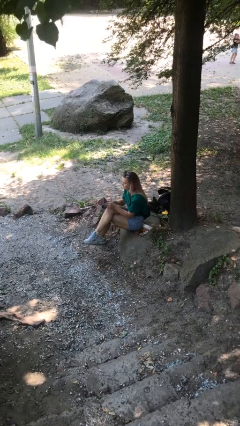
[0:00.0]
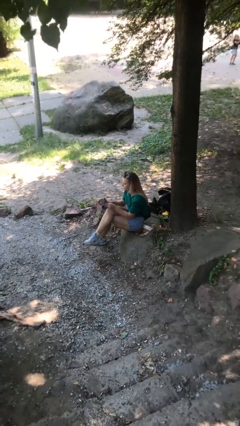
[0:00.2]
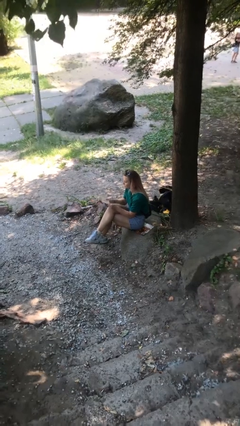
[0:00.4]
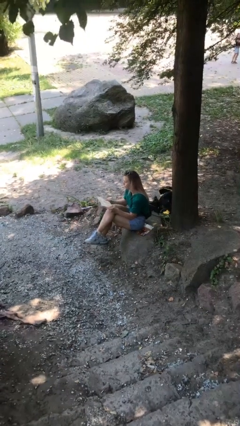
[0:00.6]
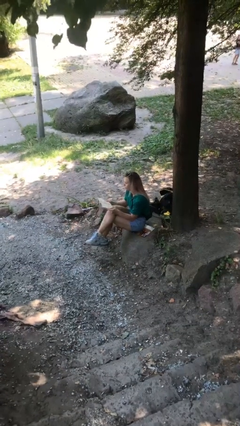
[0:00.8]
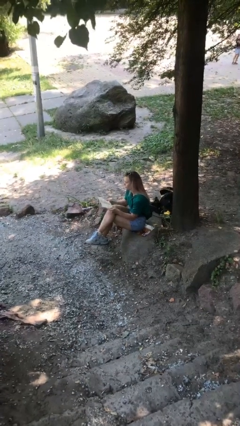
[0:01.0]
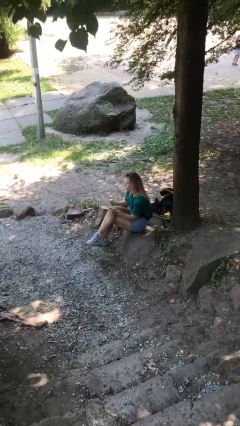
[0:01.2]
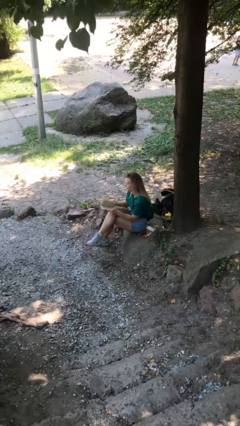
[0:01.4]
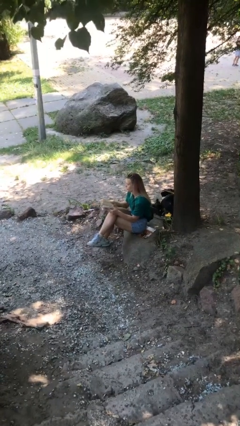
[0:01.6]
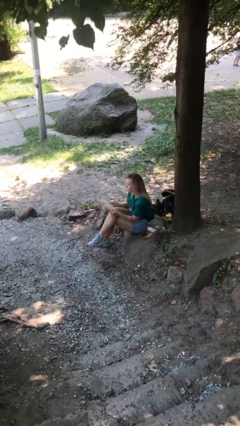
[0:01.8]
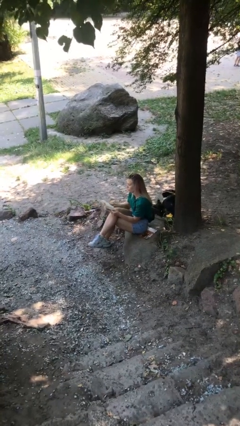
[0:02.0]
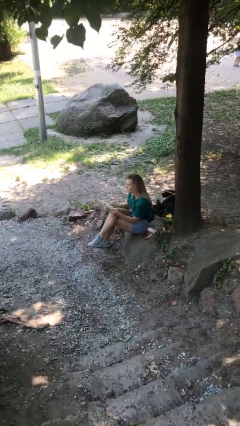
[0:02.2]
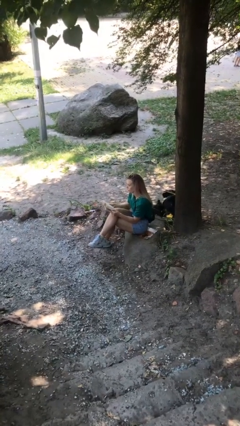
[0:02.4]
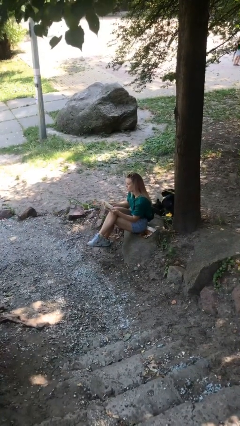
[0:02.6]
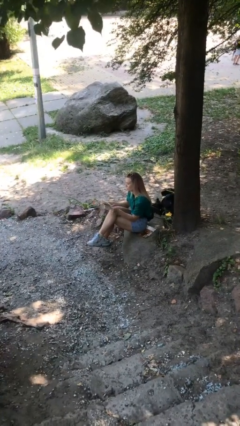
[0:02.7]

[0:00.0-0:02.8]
person reads book

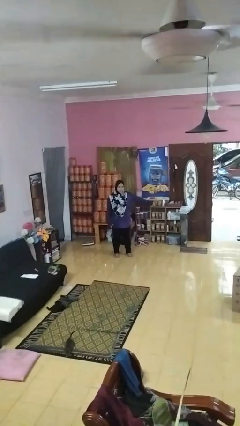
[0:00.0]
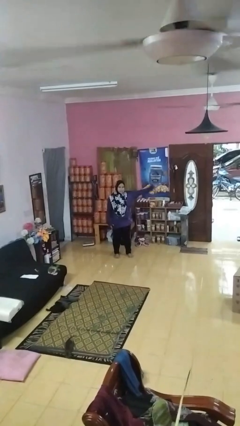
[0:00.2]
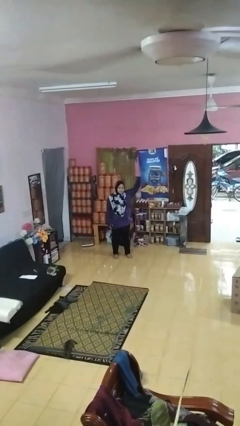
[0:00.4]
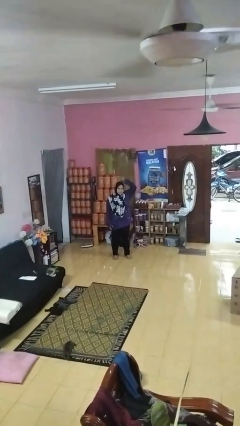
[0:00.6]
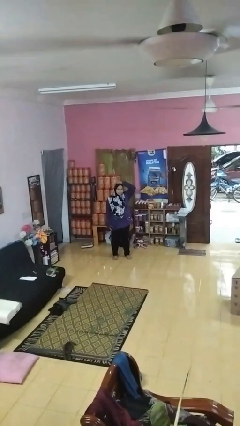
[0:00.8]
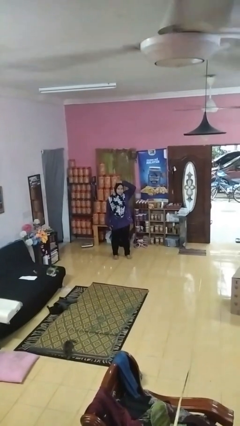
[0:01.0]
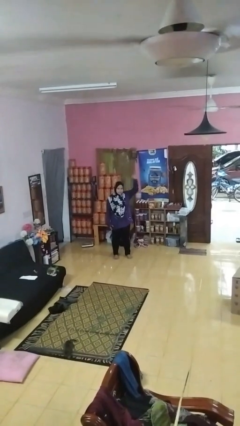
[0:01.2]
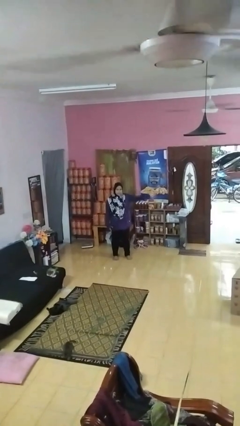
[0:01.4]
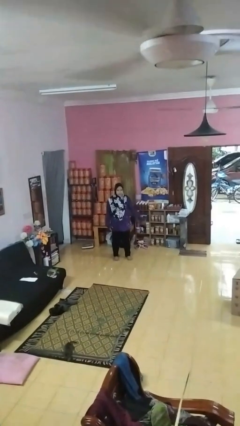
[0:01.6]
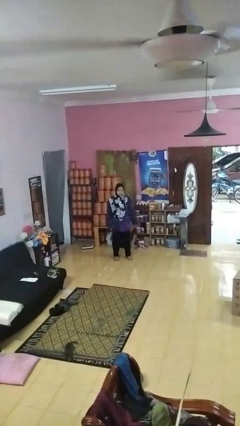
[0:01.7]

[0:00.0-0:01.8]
person pats head

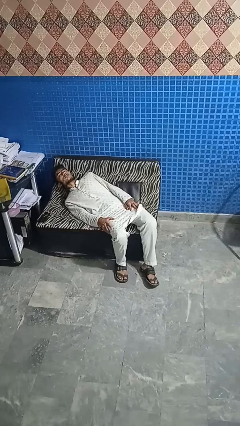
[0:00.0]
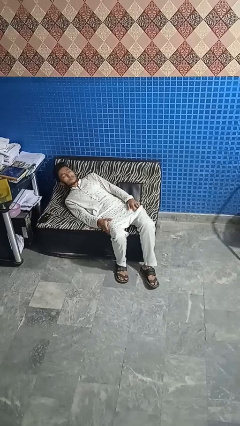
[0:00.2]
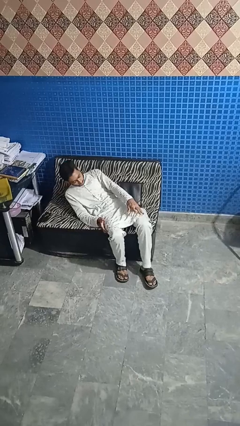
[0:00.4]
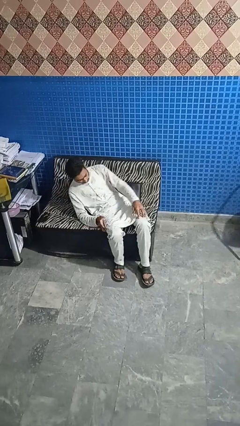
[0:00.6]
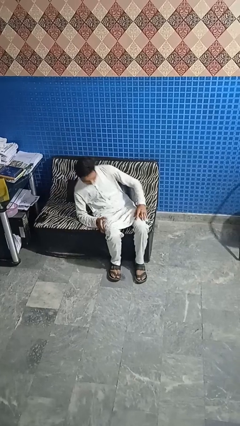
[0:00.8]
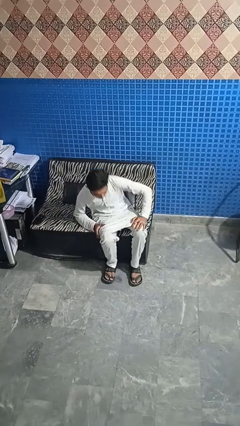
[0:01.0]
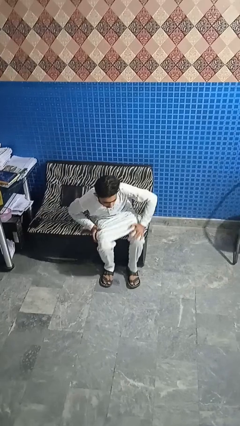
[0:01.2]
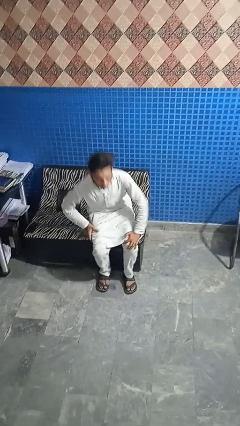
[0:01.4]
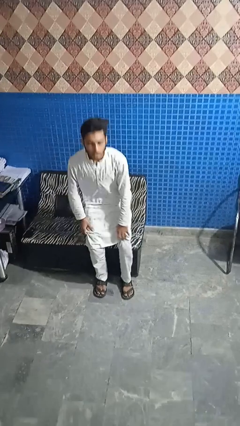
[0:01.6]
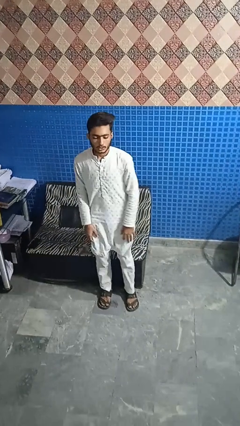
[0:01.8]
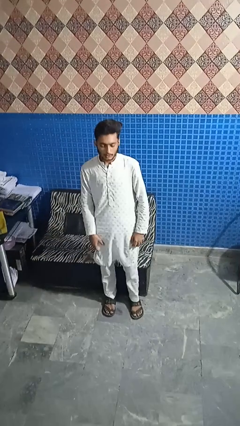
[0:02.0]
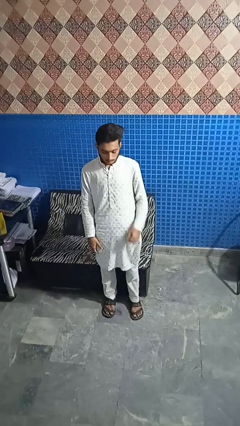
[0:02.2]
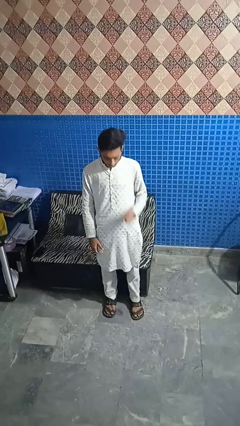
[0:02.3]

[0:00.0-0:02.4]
person stands up

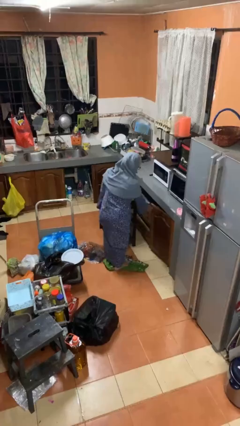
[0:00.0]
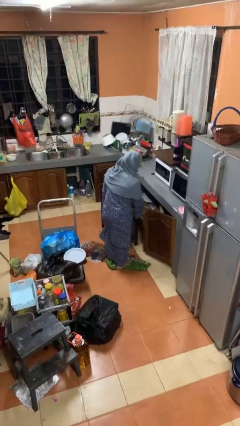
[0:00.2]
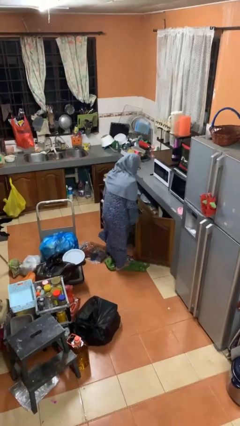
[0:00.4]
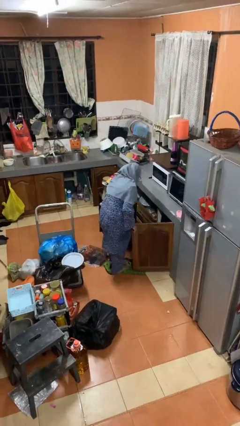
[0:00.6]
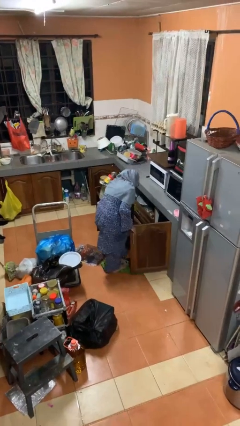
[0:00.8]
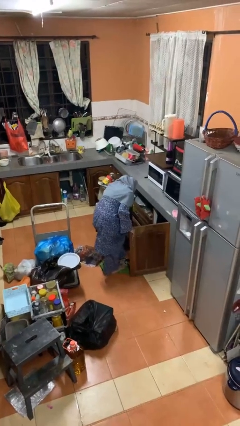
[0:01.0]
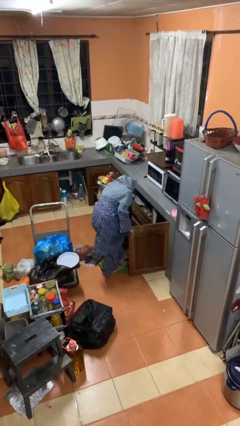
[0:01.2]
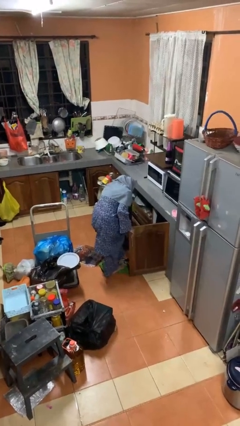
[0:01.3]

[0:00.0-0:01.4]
person opens cabinet

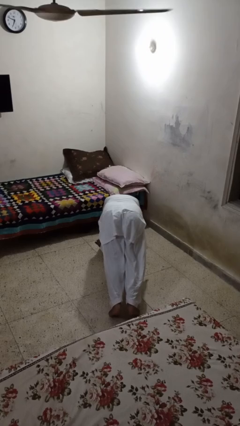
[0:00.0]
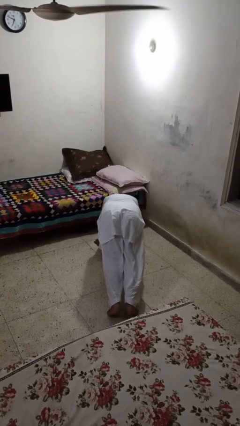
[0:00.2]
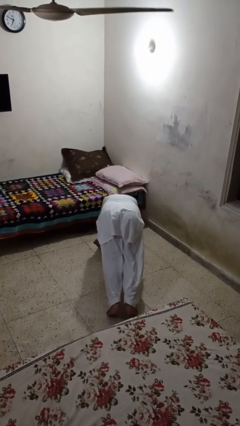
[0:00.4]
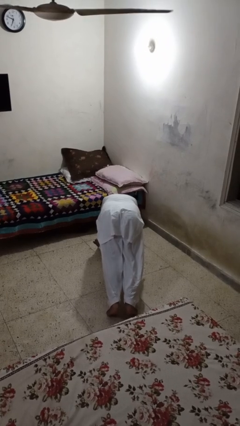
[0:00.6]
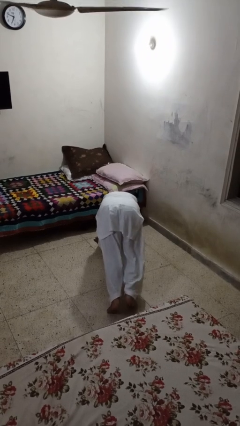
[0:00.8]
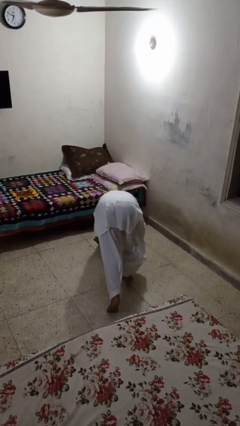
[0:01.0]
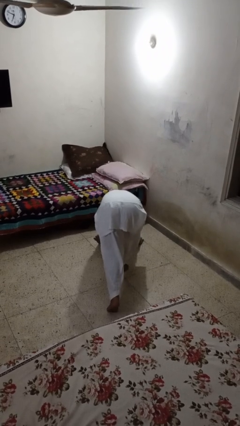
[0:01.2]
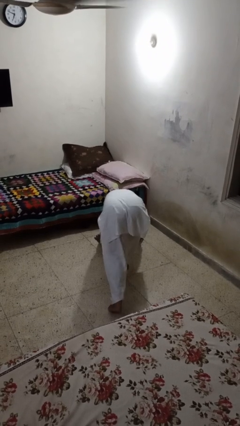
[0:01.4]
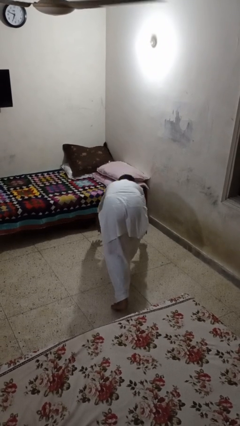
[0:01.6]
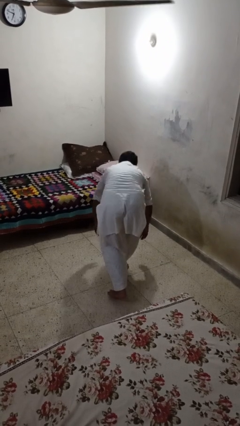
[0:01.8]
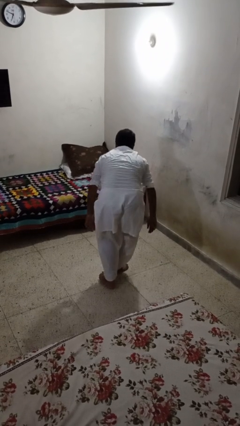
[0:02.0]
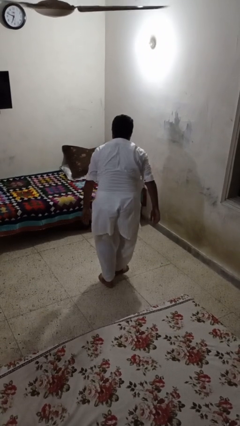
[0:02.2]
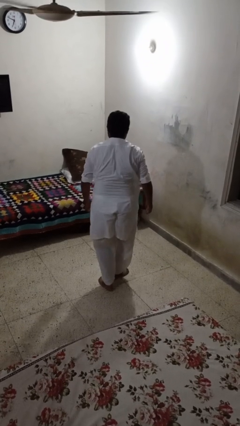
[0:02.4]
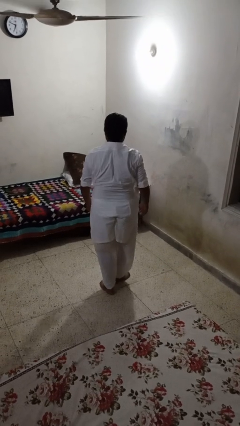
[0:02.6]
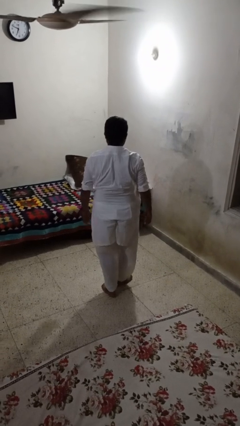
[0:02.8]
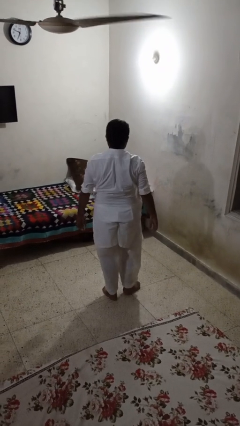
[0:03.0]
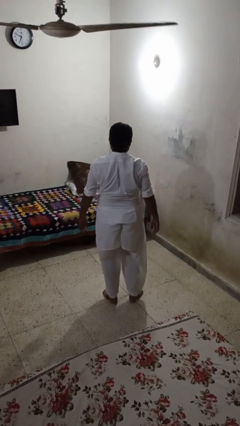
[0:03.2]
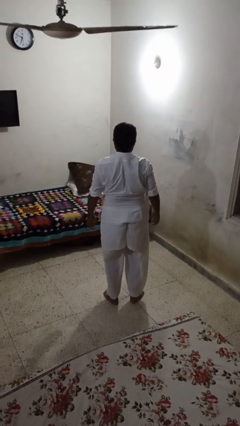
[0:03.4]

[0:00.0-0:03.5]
person stands up from floor

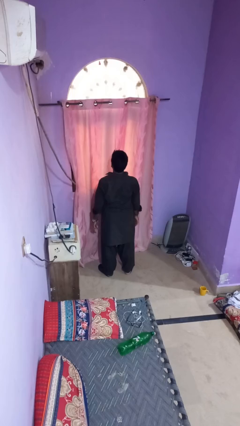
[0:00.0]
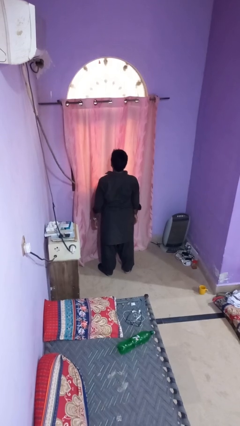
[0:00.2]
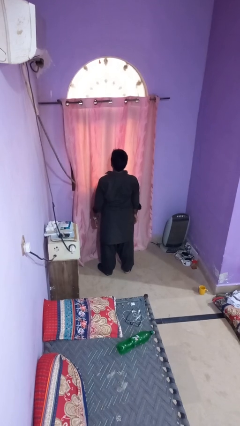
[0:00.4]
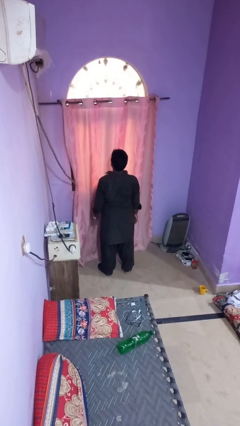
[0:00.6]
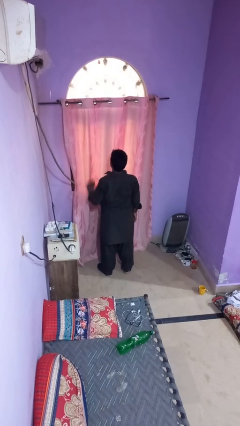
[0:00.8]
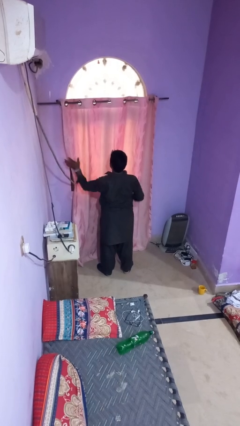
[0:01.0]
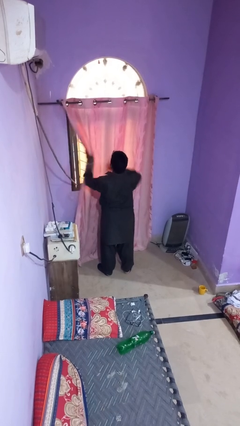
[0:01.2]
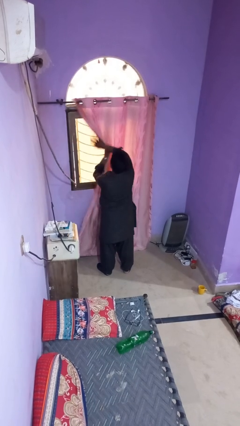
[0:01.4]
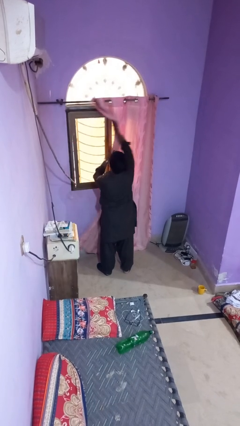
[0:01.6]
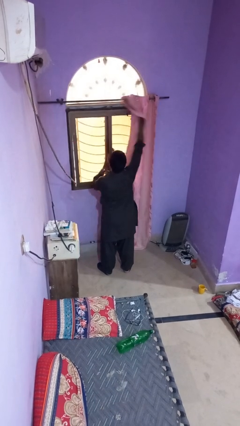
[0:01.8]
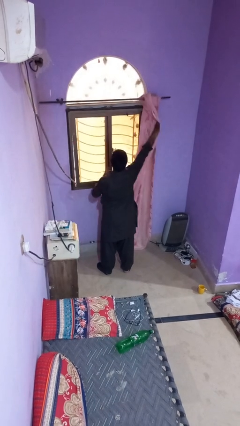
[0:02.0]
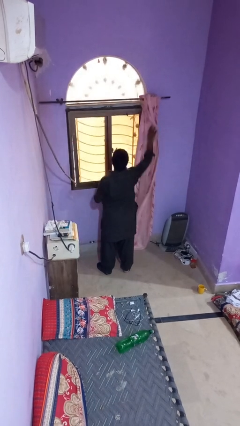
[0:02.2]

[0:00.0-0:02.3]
person opens curtains

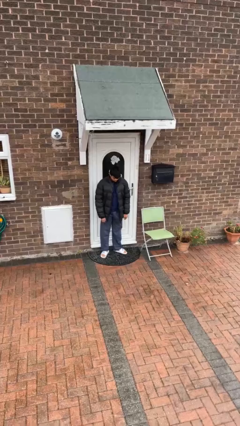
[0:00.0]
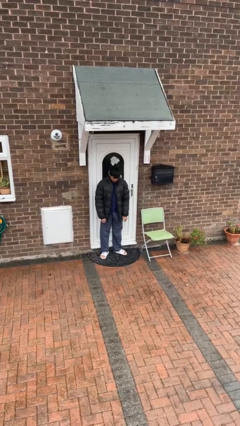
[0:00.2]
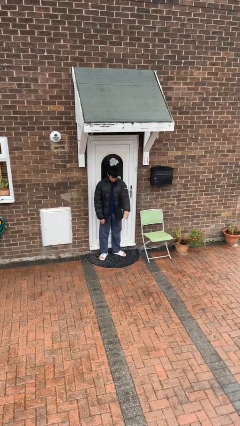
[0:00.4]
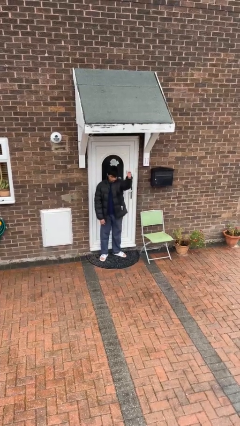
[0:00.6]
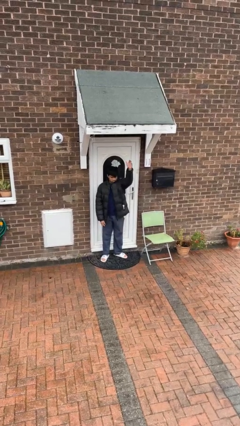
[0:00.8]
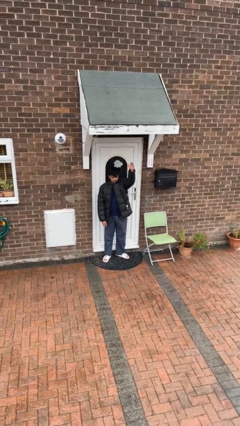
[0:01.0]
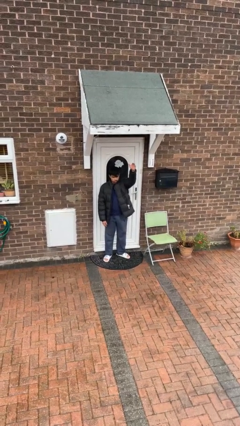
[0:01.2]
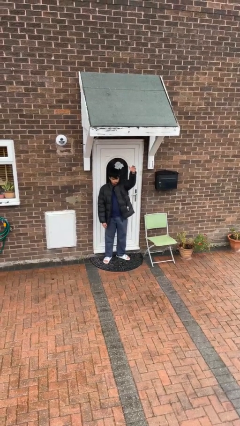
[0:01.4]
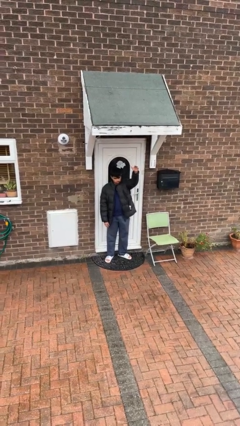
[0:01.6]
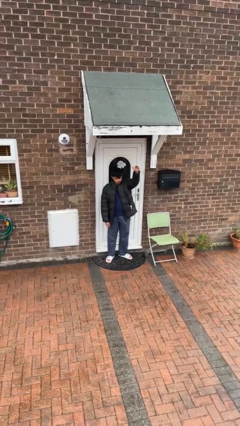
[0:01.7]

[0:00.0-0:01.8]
person gestures swipe up

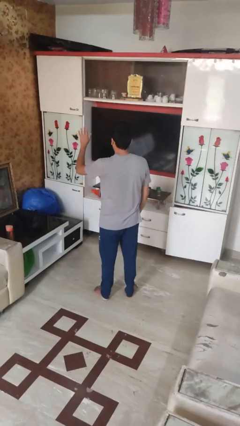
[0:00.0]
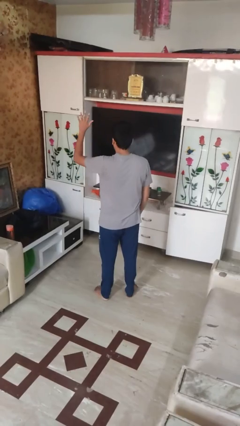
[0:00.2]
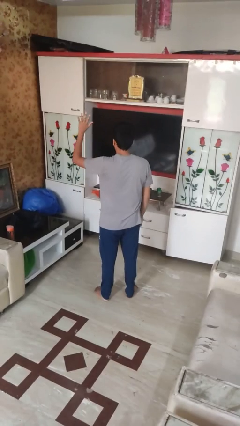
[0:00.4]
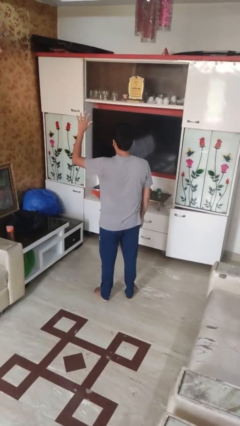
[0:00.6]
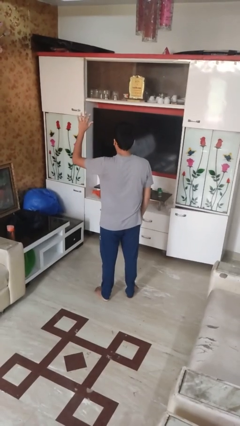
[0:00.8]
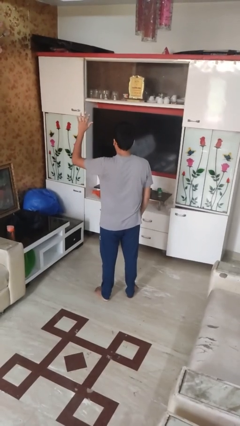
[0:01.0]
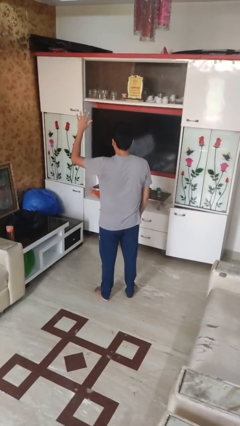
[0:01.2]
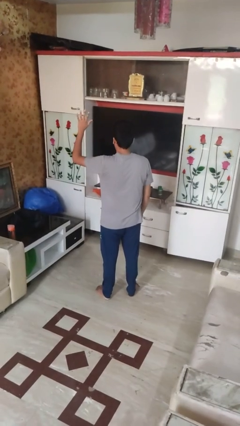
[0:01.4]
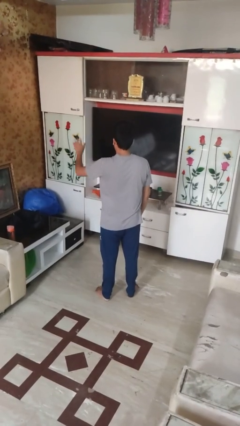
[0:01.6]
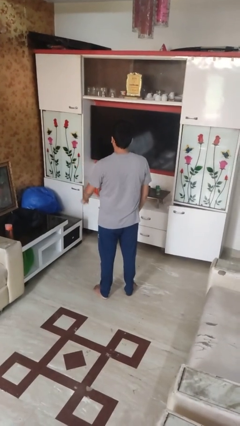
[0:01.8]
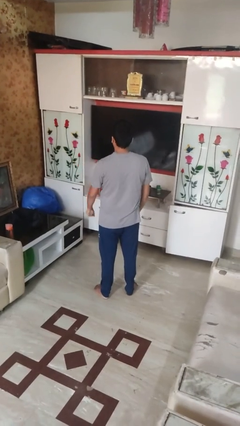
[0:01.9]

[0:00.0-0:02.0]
person gestures number five
